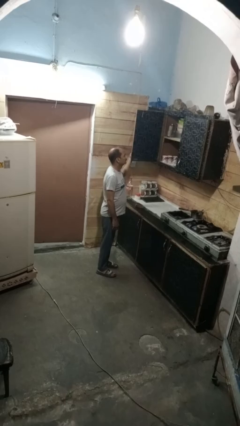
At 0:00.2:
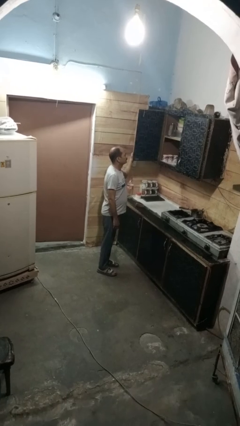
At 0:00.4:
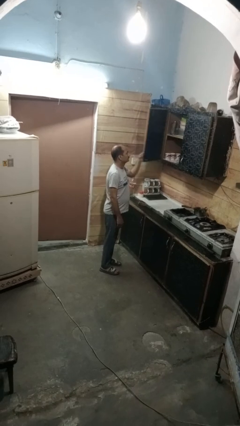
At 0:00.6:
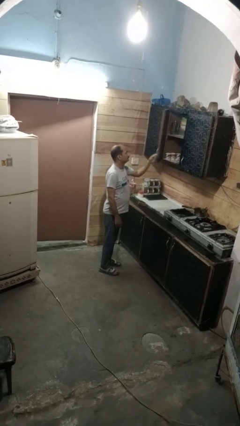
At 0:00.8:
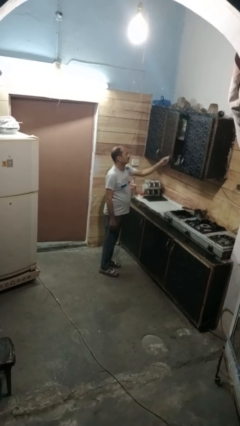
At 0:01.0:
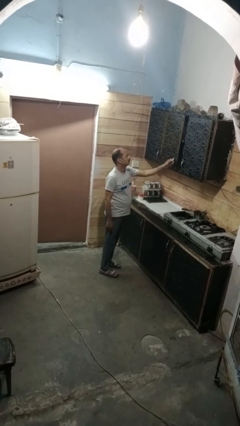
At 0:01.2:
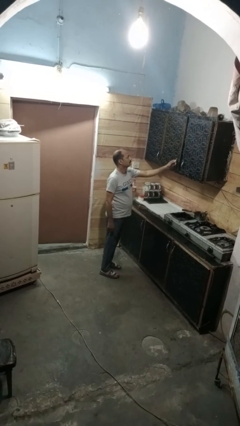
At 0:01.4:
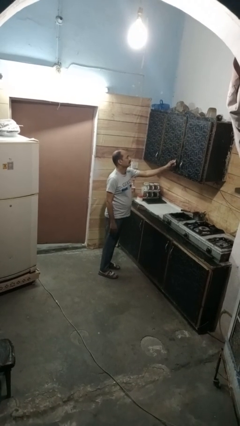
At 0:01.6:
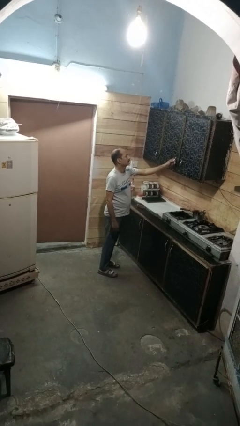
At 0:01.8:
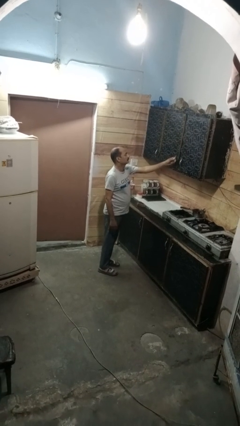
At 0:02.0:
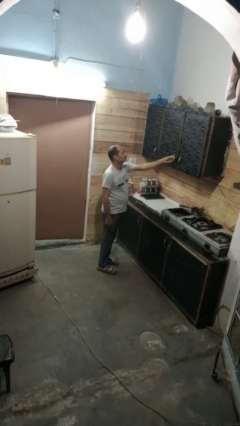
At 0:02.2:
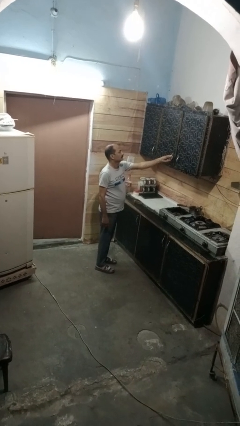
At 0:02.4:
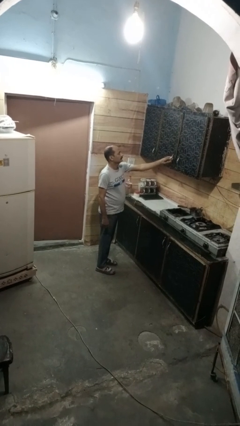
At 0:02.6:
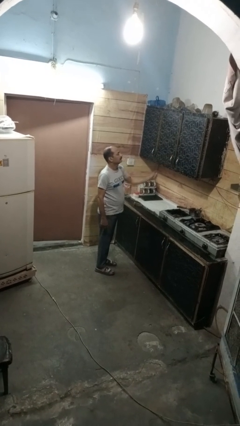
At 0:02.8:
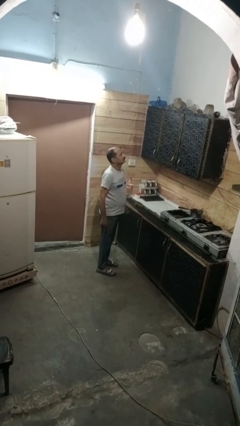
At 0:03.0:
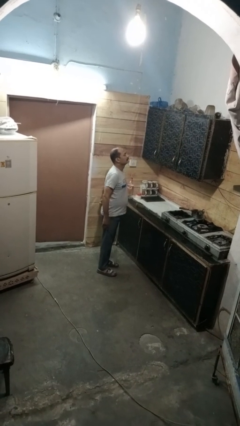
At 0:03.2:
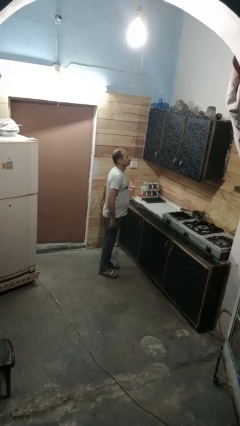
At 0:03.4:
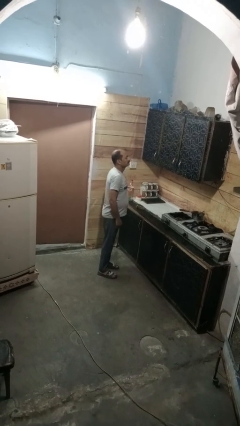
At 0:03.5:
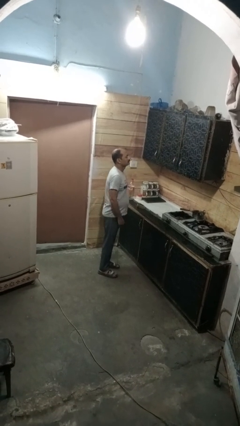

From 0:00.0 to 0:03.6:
person closes cabinet

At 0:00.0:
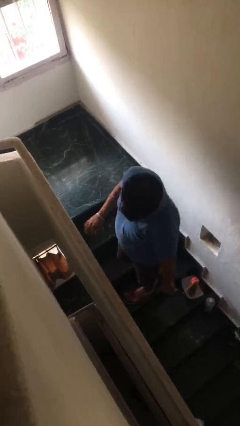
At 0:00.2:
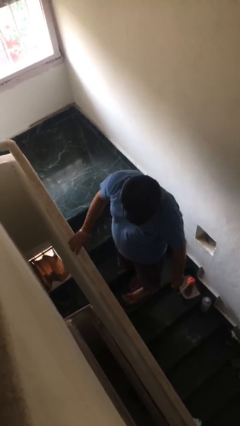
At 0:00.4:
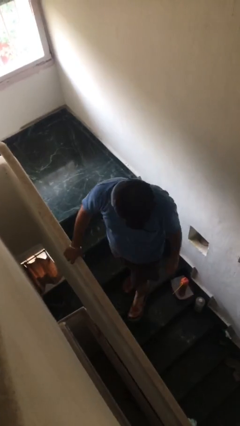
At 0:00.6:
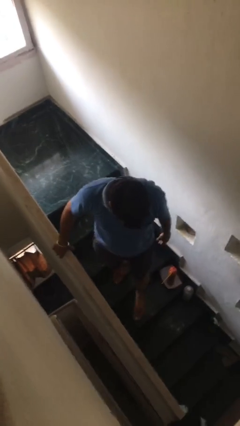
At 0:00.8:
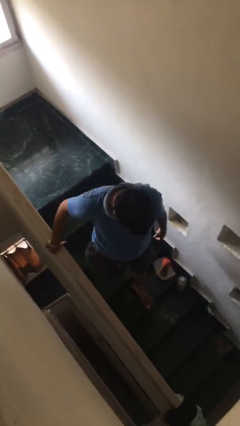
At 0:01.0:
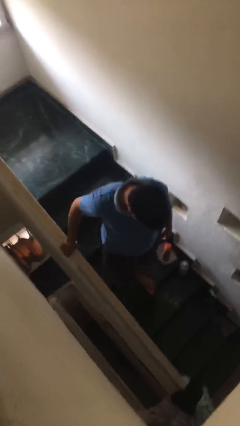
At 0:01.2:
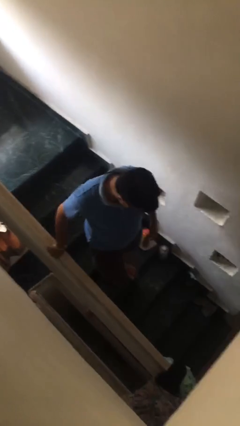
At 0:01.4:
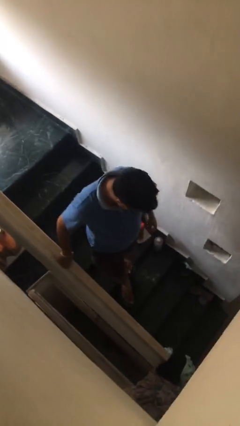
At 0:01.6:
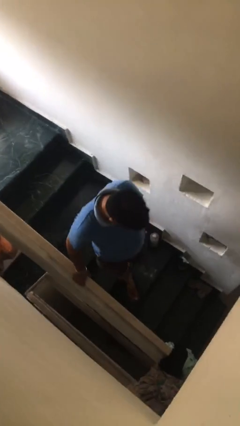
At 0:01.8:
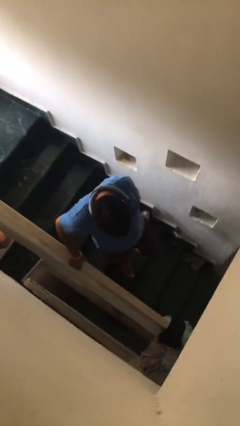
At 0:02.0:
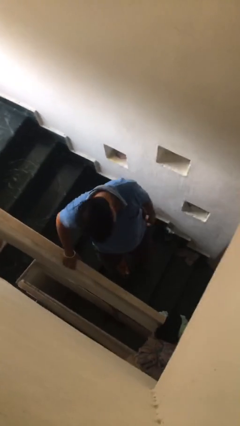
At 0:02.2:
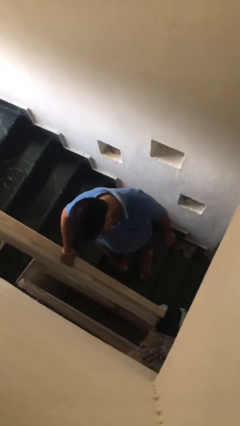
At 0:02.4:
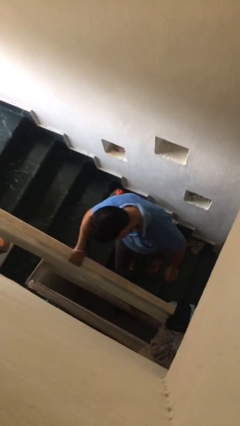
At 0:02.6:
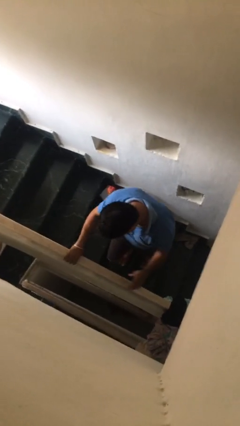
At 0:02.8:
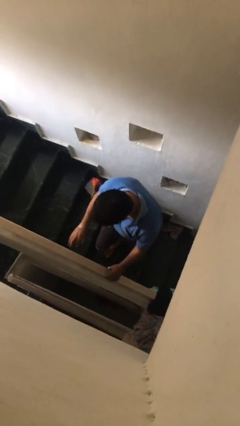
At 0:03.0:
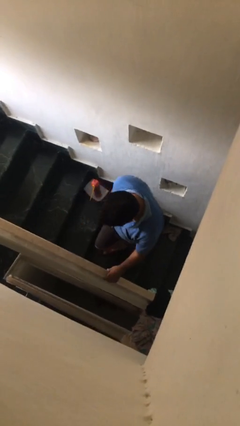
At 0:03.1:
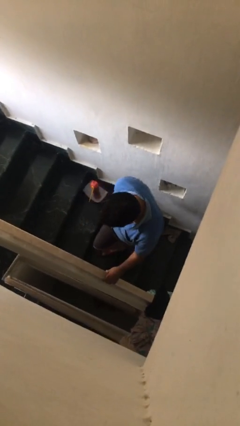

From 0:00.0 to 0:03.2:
person climbs down stairs

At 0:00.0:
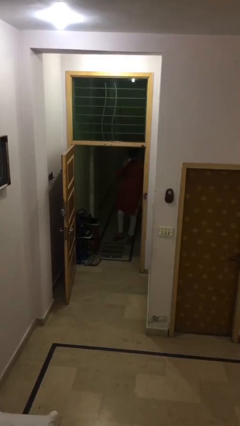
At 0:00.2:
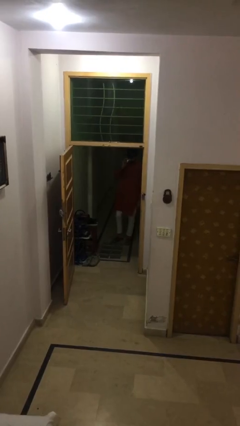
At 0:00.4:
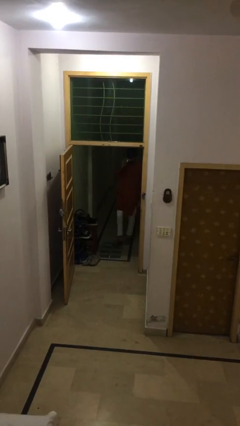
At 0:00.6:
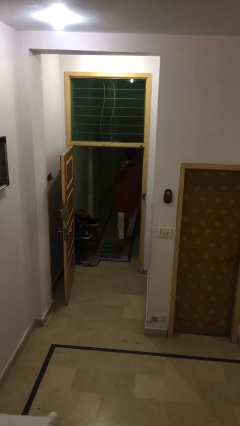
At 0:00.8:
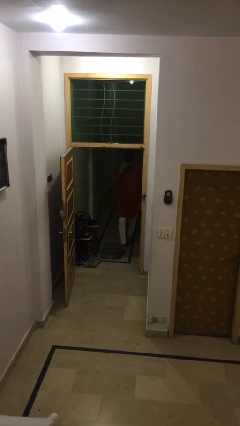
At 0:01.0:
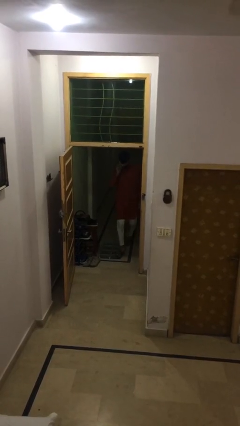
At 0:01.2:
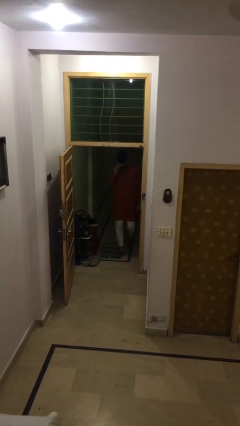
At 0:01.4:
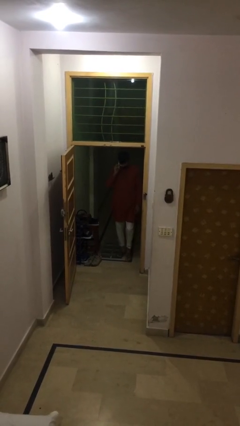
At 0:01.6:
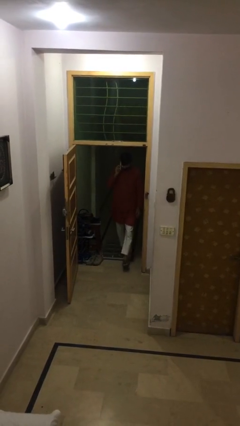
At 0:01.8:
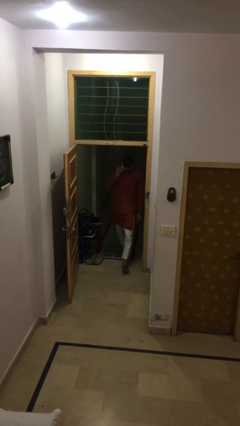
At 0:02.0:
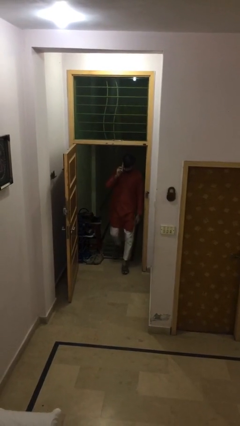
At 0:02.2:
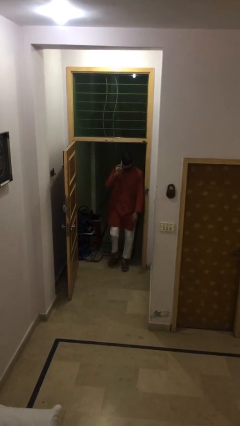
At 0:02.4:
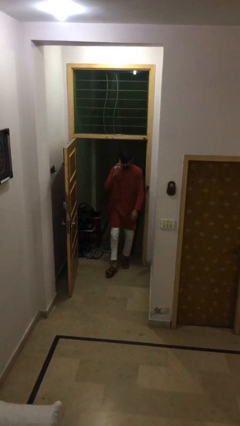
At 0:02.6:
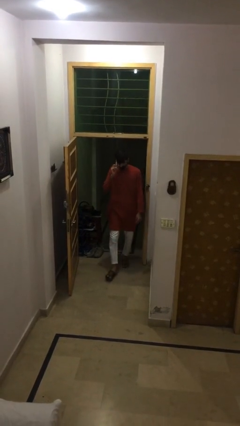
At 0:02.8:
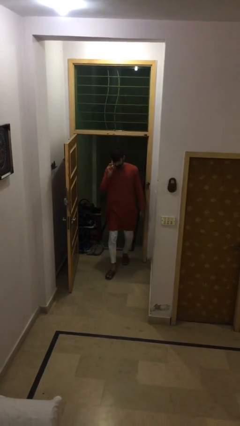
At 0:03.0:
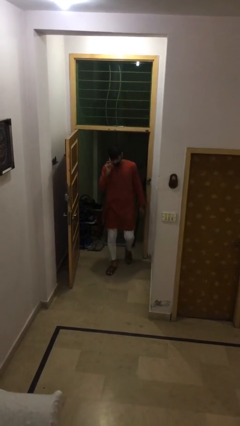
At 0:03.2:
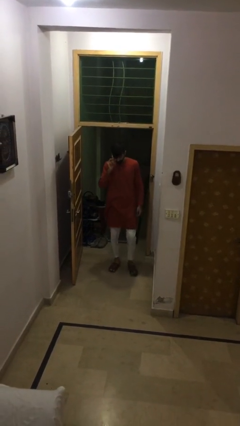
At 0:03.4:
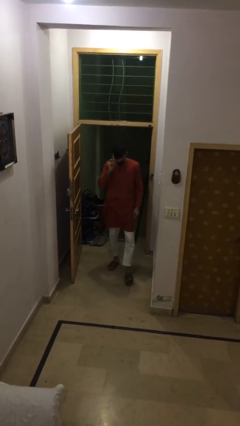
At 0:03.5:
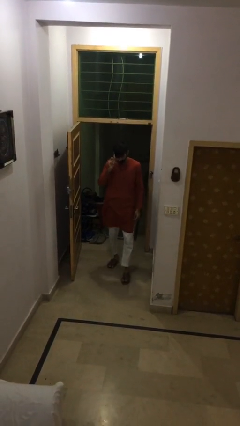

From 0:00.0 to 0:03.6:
person enters scene through structure

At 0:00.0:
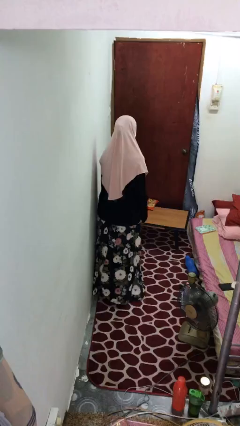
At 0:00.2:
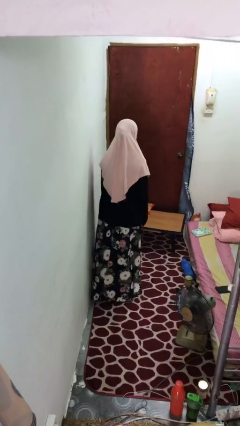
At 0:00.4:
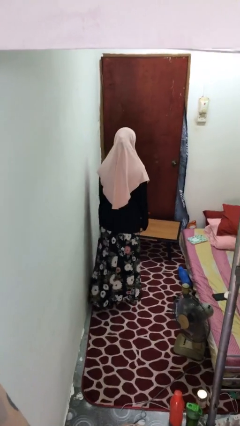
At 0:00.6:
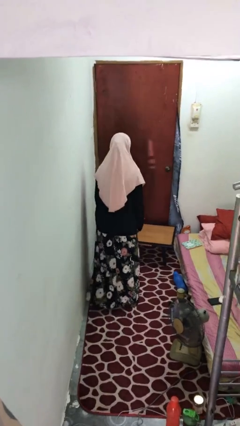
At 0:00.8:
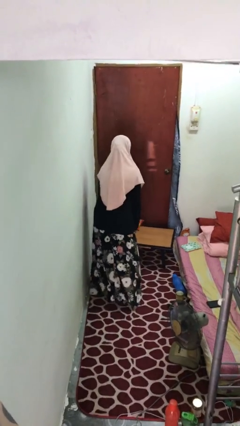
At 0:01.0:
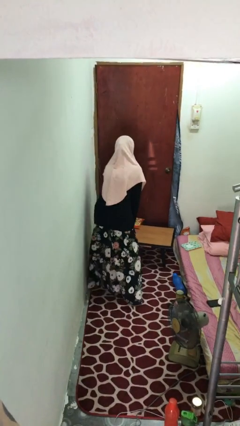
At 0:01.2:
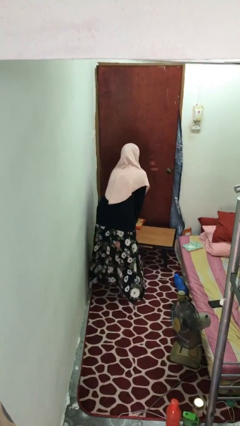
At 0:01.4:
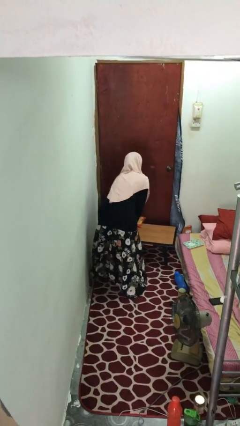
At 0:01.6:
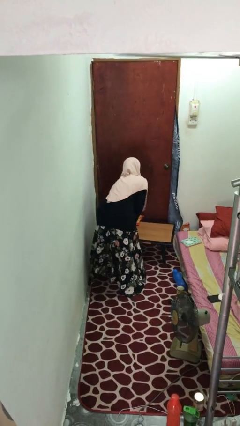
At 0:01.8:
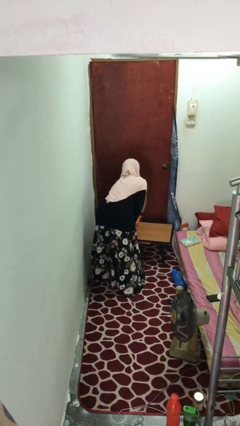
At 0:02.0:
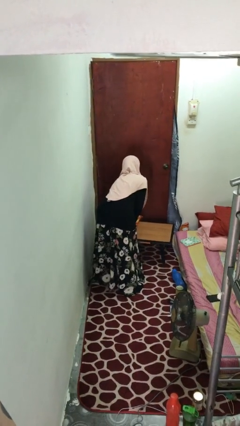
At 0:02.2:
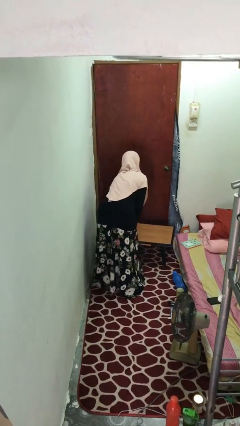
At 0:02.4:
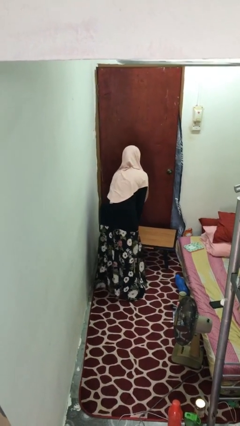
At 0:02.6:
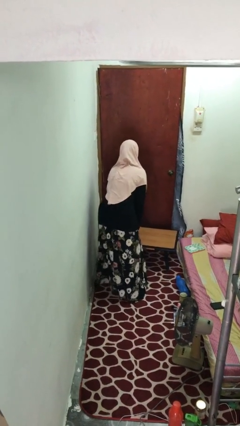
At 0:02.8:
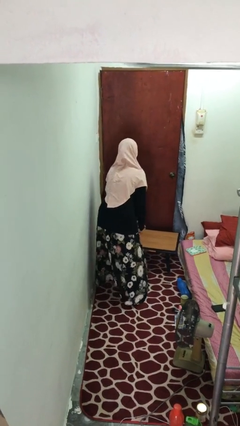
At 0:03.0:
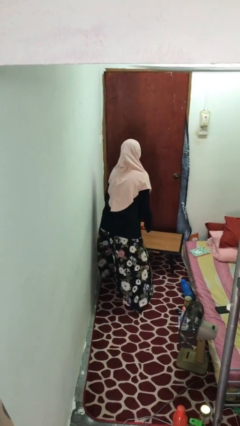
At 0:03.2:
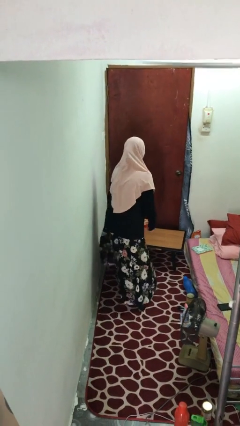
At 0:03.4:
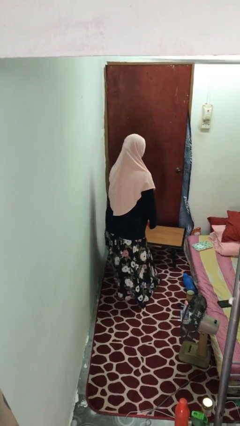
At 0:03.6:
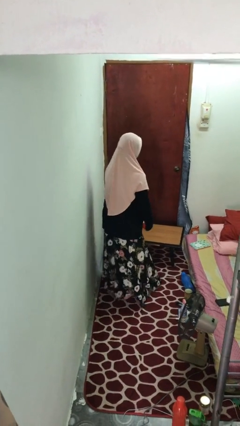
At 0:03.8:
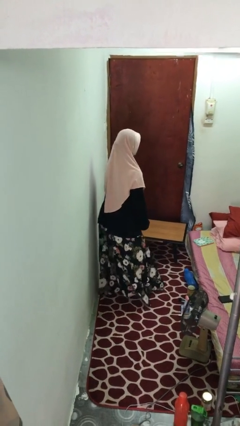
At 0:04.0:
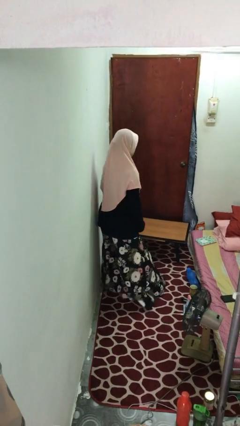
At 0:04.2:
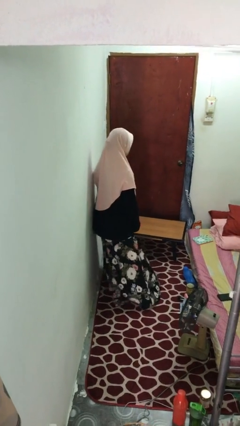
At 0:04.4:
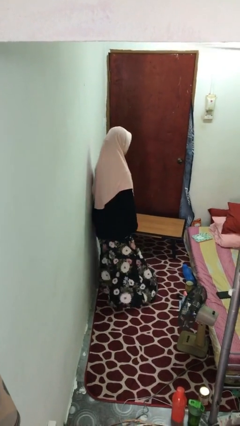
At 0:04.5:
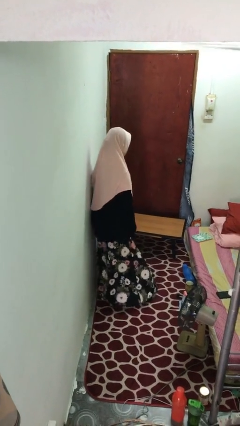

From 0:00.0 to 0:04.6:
person picks up object from table

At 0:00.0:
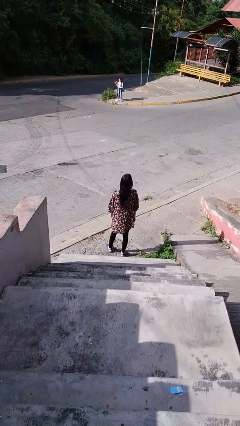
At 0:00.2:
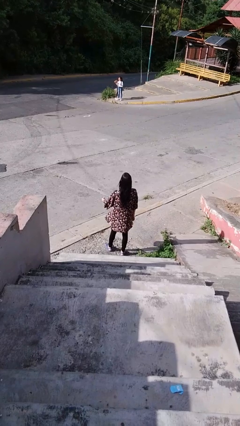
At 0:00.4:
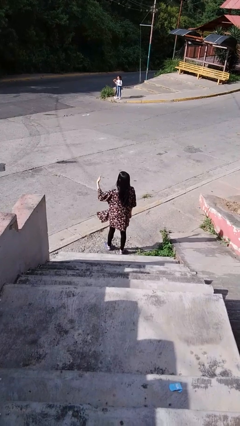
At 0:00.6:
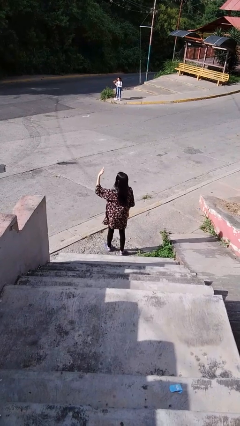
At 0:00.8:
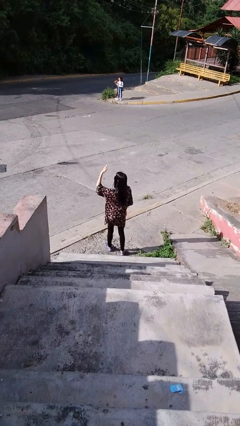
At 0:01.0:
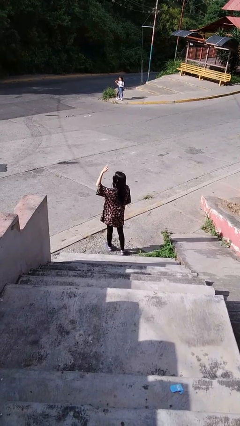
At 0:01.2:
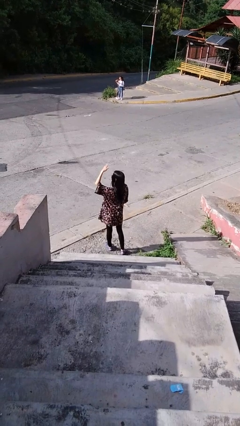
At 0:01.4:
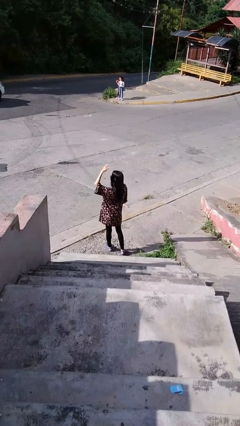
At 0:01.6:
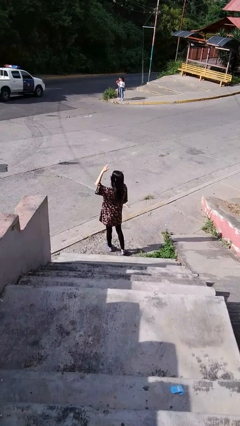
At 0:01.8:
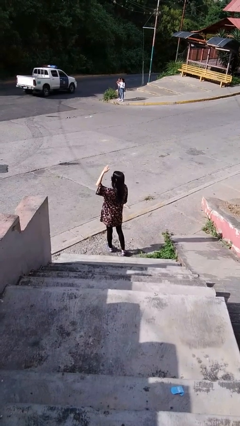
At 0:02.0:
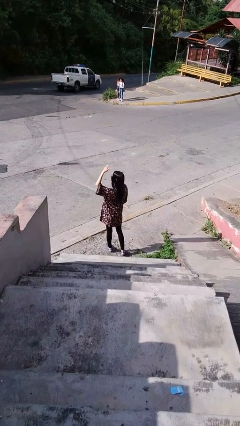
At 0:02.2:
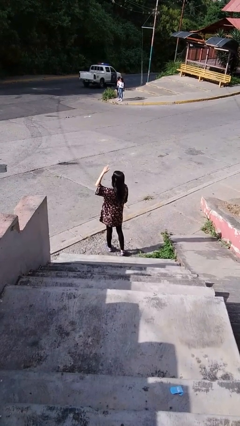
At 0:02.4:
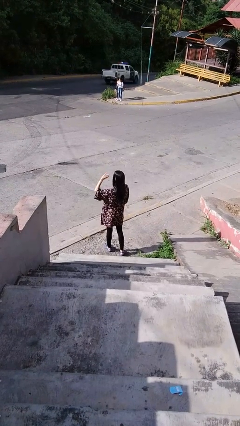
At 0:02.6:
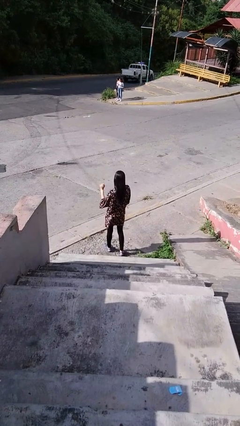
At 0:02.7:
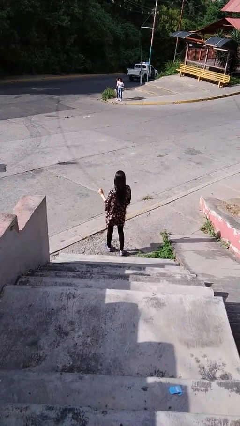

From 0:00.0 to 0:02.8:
person shades eyes
